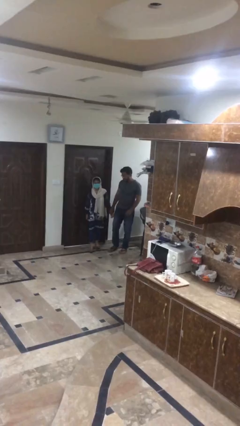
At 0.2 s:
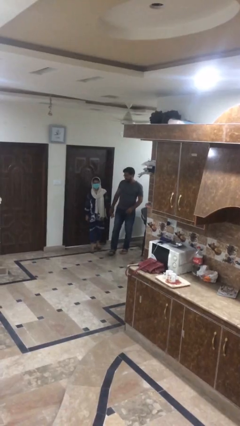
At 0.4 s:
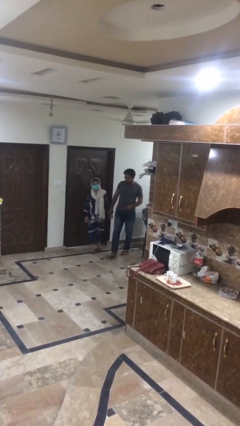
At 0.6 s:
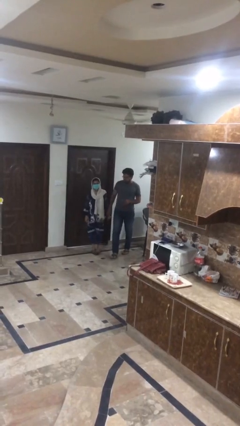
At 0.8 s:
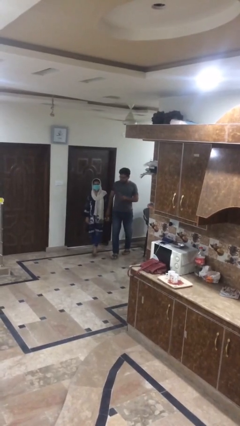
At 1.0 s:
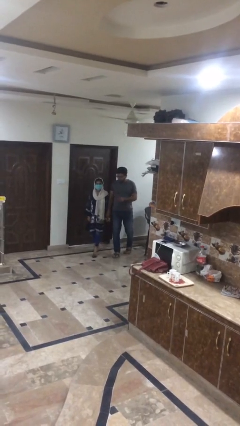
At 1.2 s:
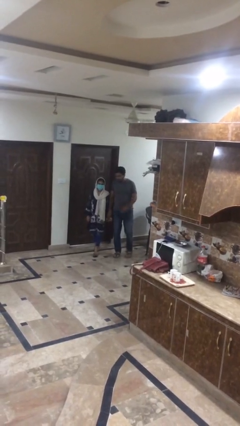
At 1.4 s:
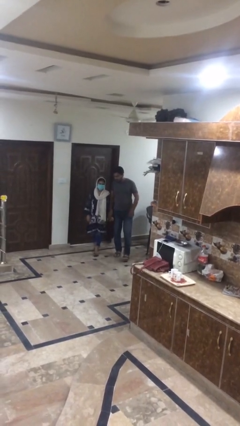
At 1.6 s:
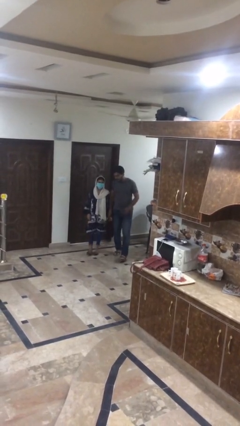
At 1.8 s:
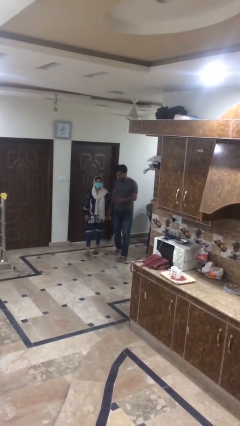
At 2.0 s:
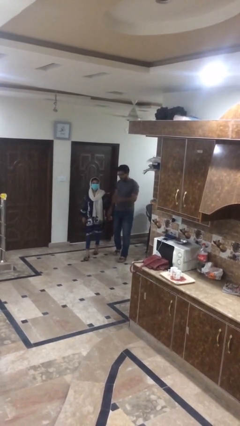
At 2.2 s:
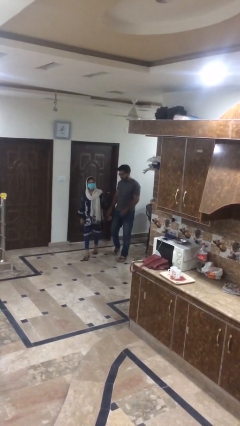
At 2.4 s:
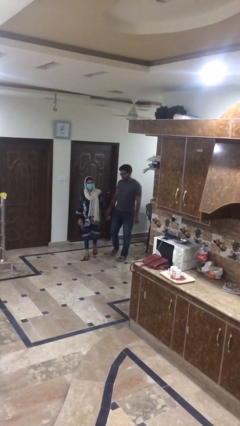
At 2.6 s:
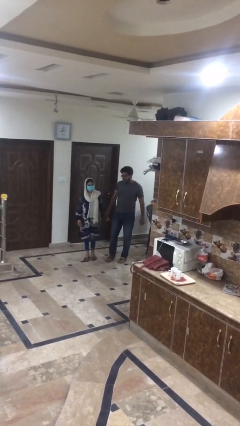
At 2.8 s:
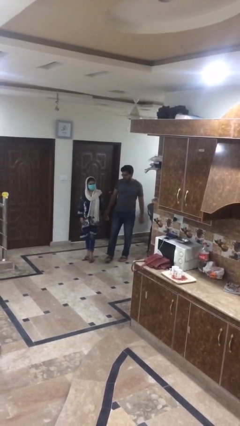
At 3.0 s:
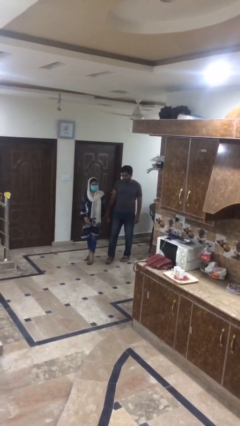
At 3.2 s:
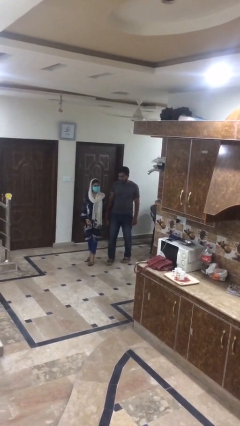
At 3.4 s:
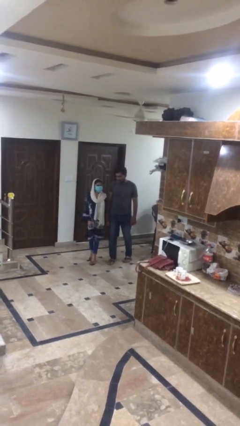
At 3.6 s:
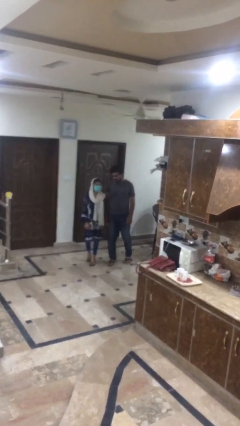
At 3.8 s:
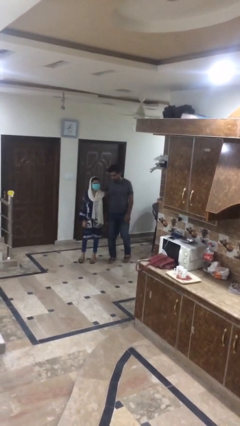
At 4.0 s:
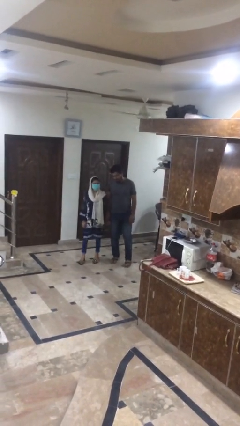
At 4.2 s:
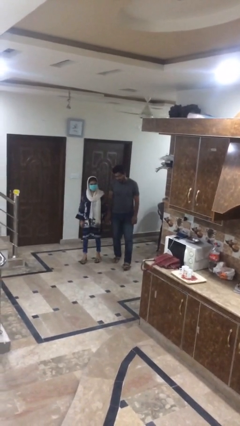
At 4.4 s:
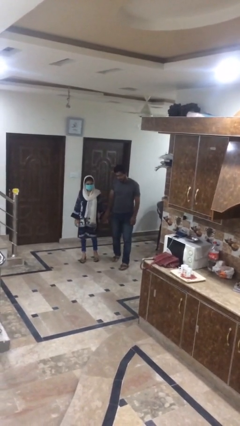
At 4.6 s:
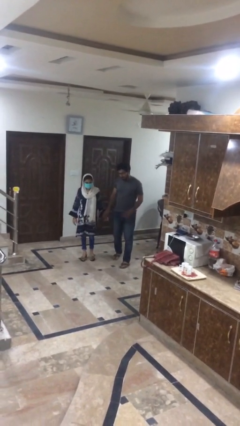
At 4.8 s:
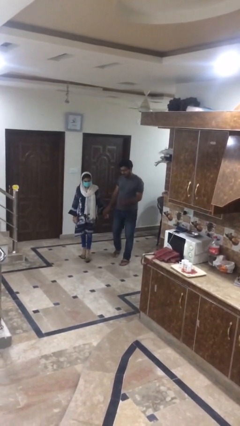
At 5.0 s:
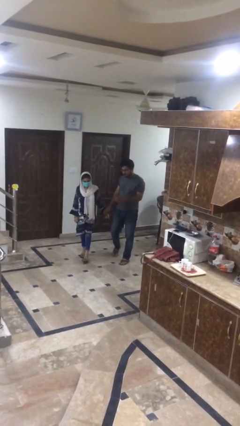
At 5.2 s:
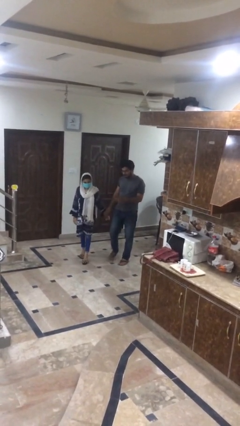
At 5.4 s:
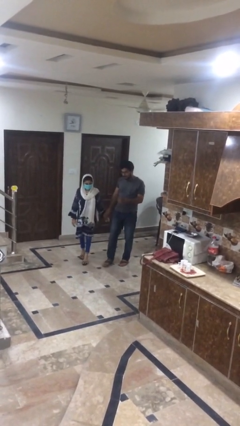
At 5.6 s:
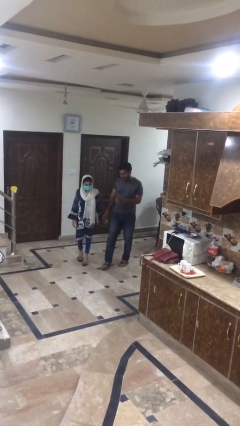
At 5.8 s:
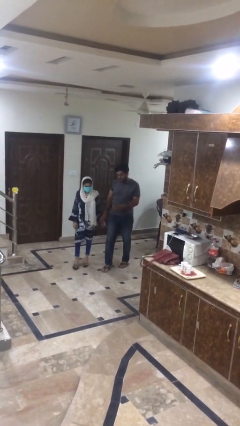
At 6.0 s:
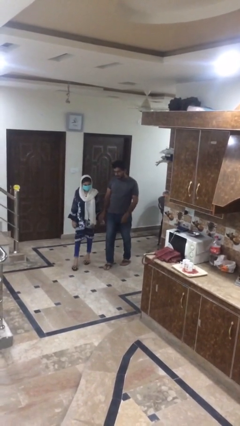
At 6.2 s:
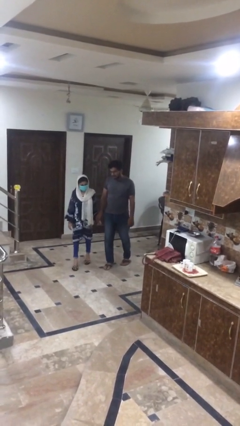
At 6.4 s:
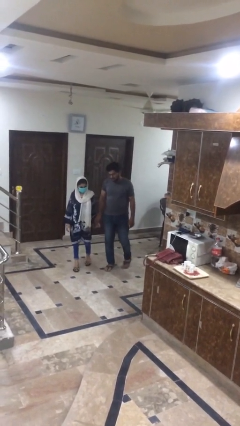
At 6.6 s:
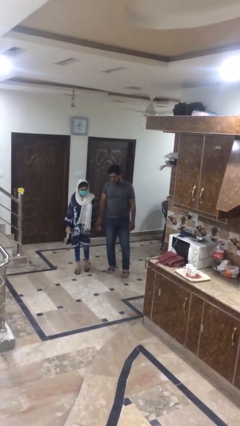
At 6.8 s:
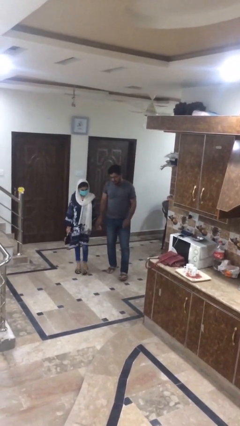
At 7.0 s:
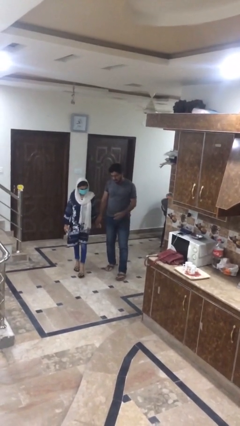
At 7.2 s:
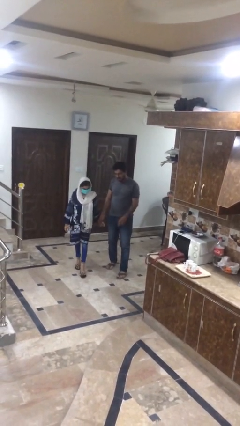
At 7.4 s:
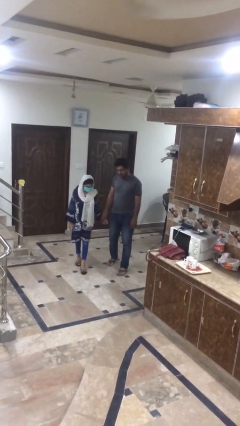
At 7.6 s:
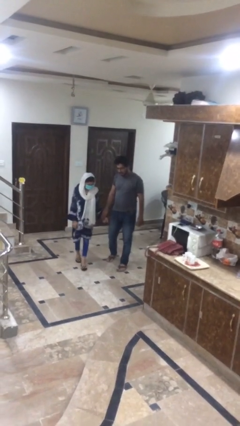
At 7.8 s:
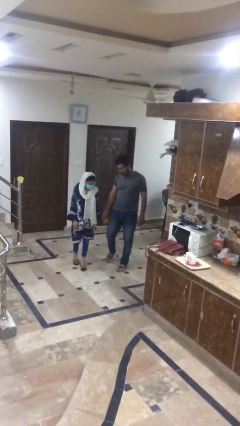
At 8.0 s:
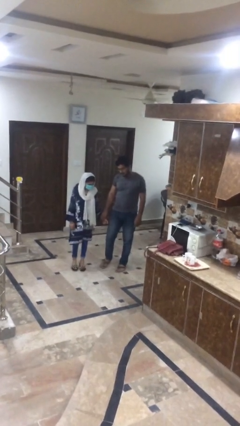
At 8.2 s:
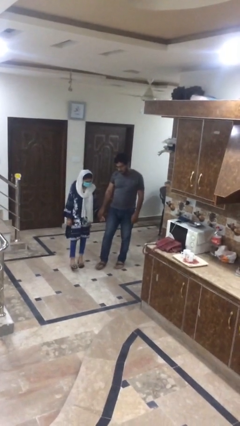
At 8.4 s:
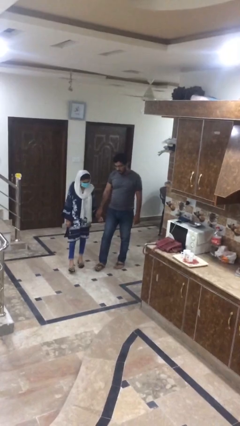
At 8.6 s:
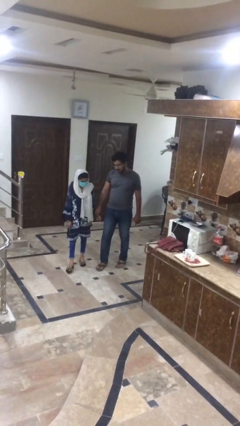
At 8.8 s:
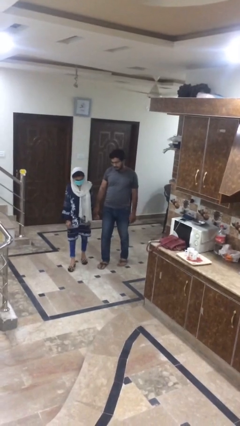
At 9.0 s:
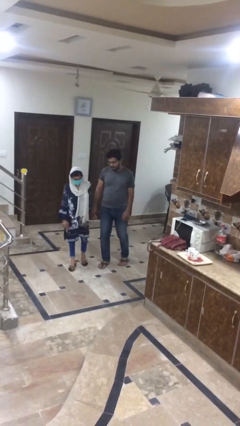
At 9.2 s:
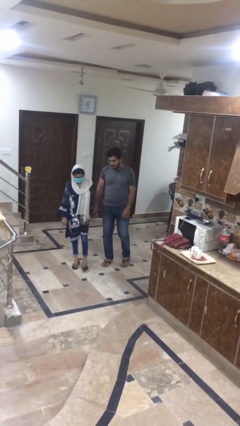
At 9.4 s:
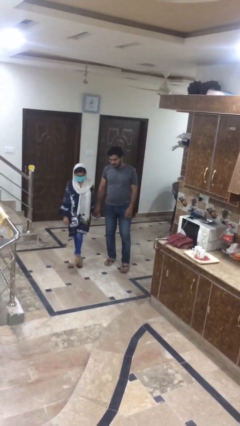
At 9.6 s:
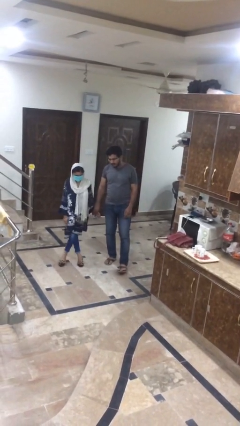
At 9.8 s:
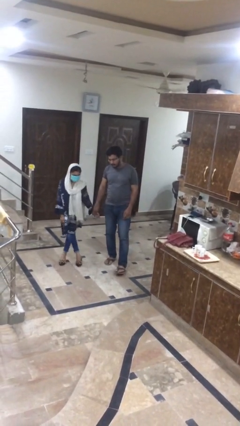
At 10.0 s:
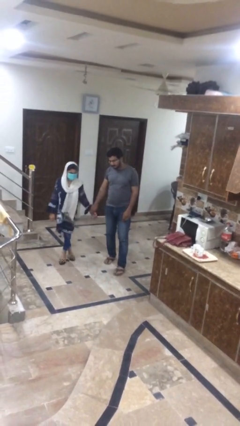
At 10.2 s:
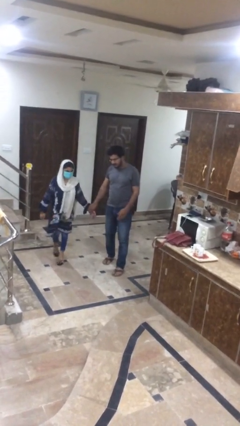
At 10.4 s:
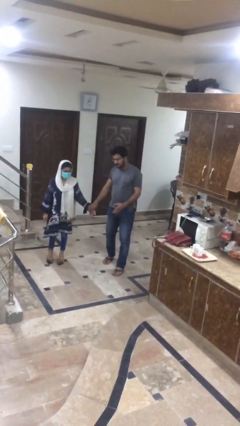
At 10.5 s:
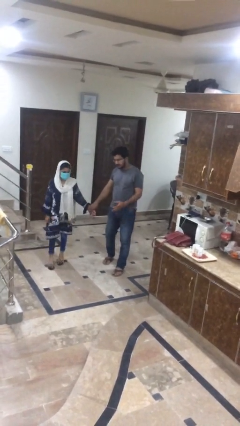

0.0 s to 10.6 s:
person holds hand

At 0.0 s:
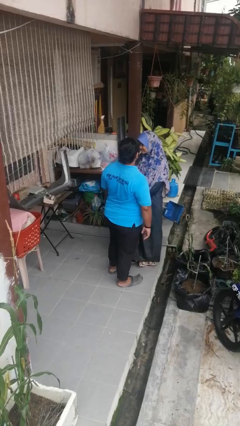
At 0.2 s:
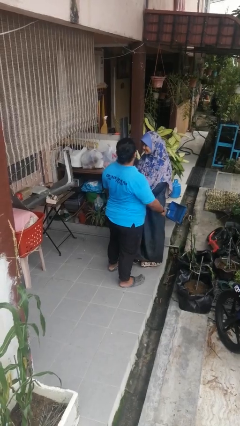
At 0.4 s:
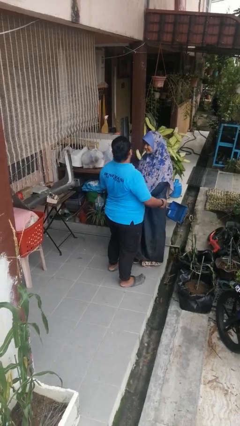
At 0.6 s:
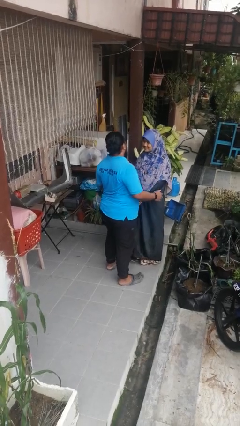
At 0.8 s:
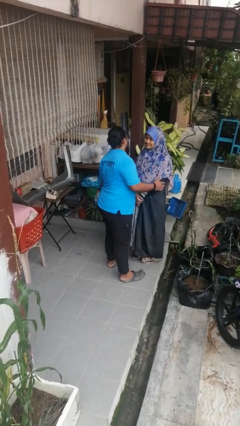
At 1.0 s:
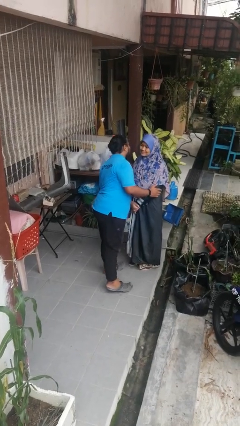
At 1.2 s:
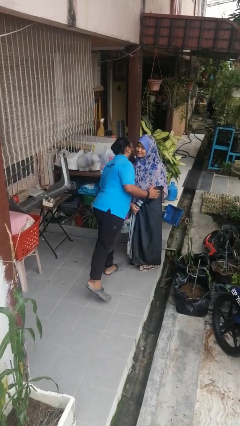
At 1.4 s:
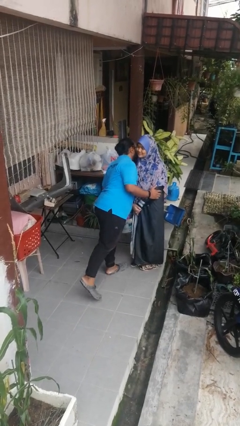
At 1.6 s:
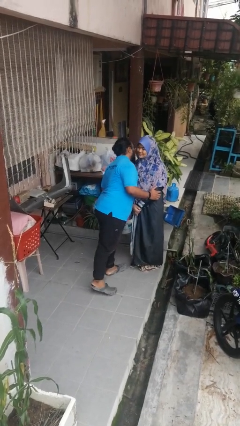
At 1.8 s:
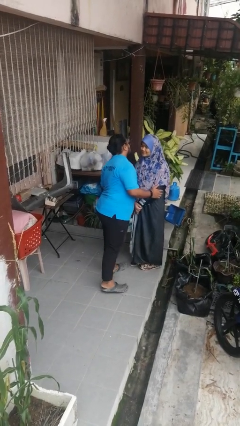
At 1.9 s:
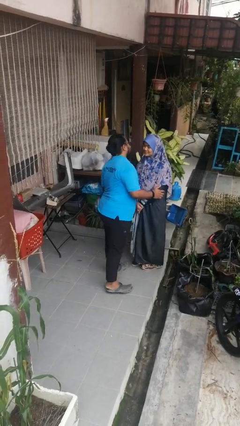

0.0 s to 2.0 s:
person kisses cheek of person

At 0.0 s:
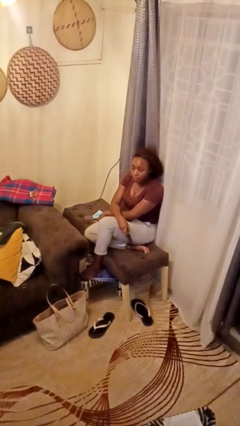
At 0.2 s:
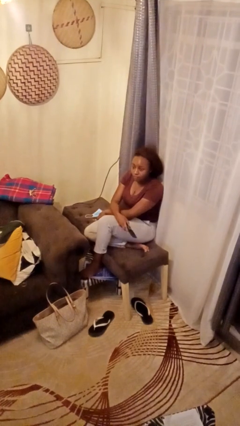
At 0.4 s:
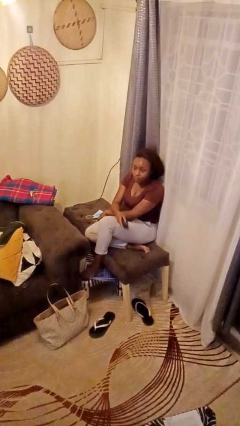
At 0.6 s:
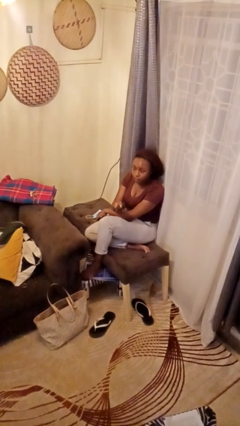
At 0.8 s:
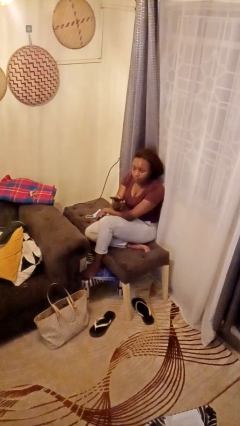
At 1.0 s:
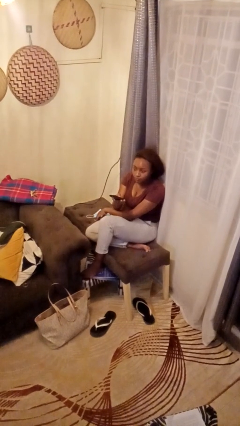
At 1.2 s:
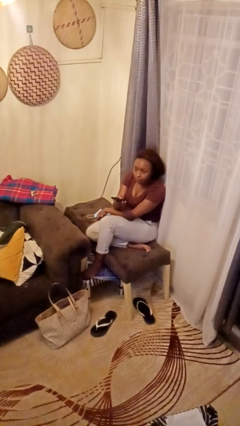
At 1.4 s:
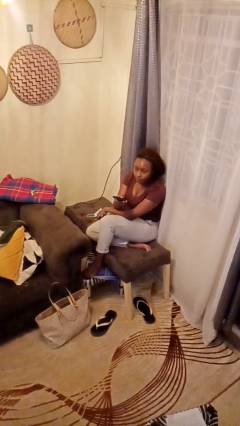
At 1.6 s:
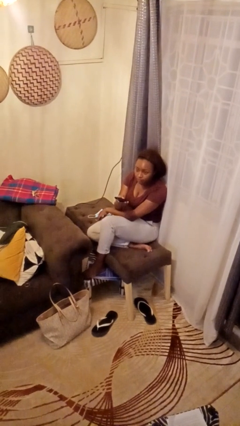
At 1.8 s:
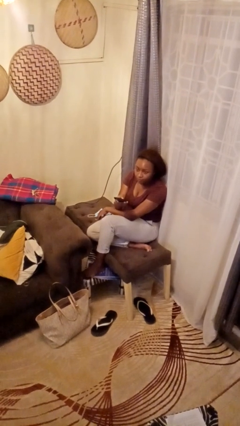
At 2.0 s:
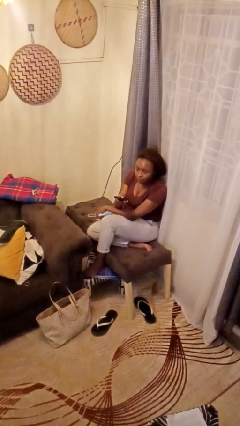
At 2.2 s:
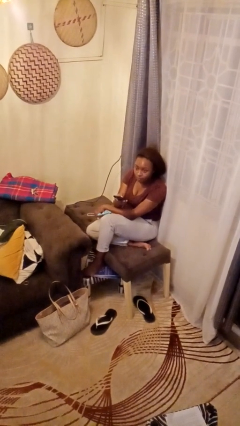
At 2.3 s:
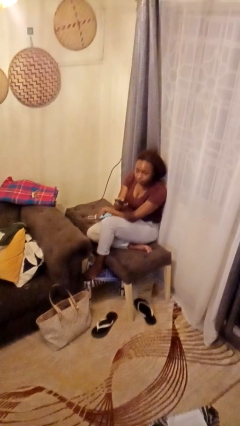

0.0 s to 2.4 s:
person uses television remote

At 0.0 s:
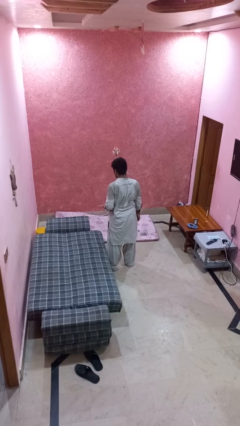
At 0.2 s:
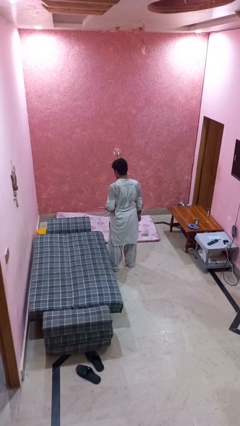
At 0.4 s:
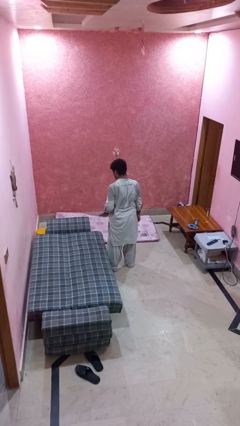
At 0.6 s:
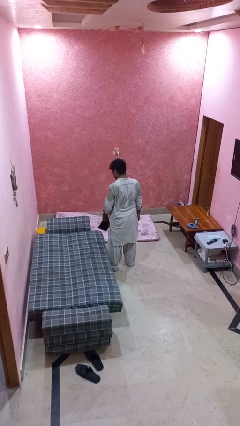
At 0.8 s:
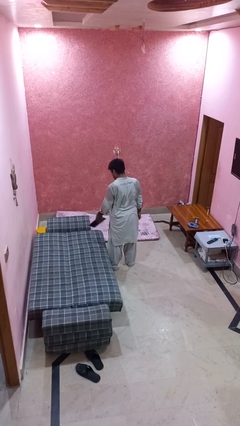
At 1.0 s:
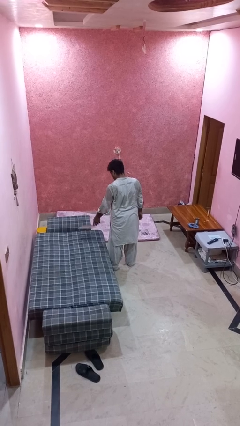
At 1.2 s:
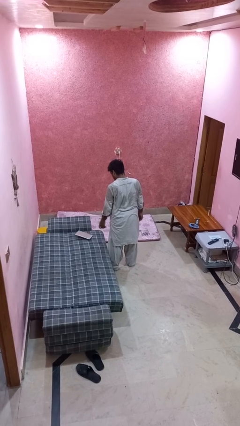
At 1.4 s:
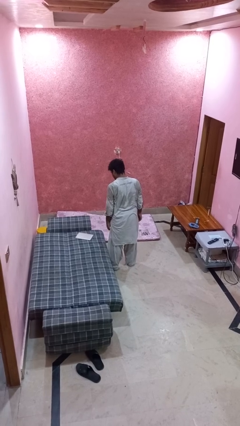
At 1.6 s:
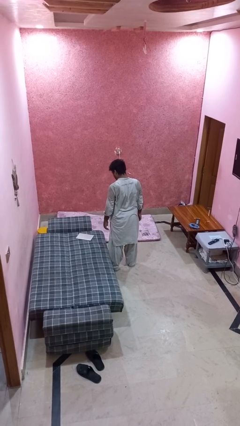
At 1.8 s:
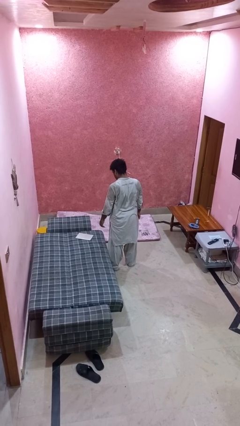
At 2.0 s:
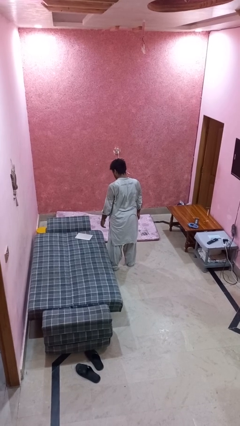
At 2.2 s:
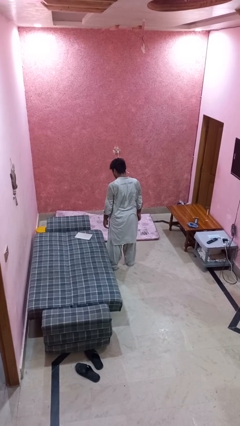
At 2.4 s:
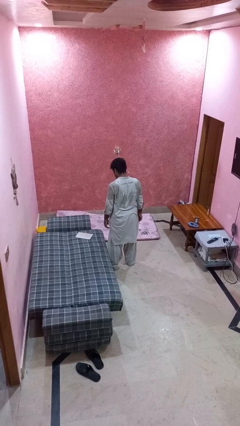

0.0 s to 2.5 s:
person throws object on bed
